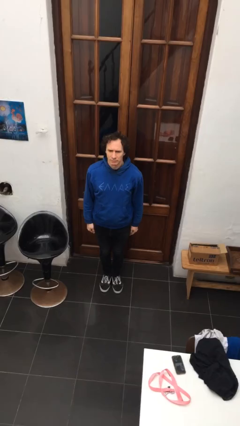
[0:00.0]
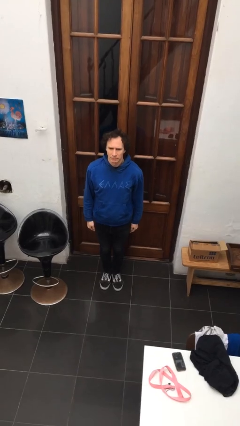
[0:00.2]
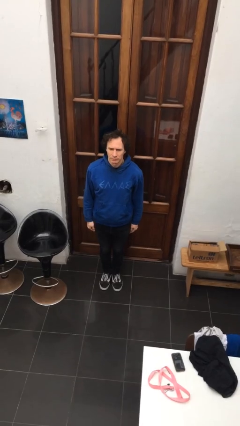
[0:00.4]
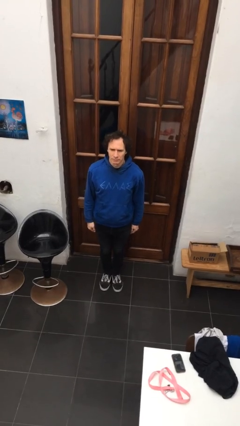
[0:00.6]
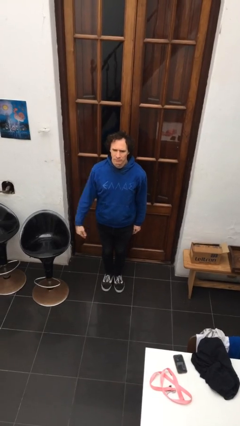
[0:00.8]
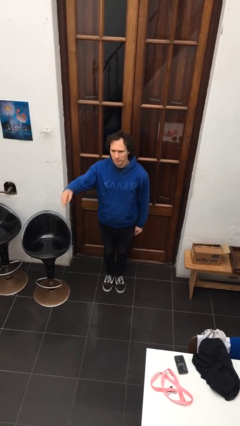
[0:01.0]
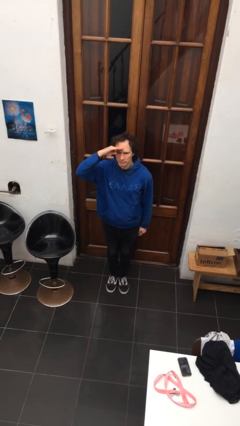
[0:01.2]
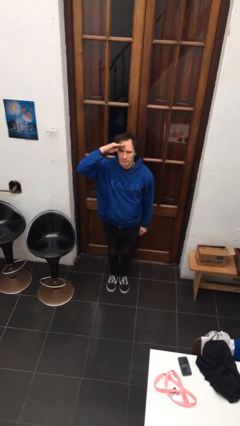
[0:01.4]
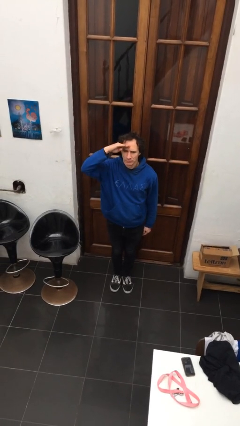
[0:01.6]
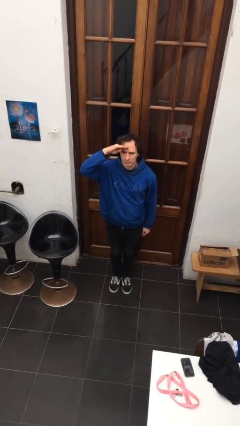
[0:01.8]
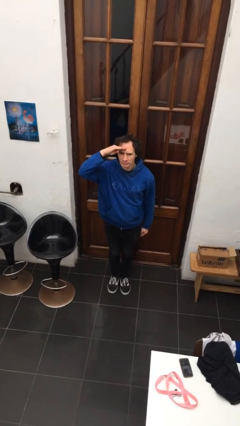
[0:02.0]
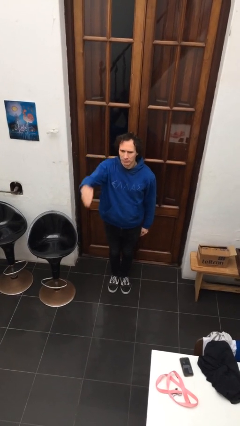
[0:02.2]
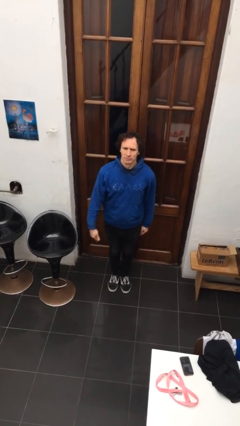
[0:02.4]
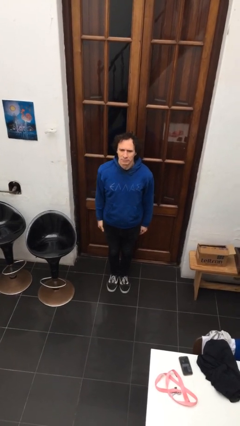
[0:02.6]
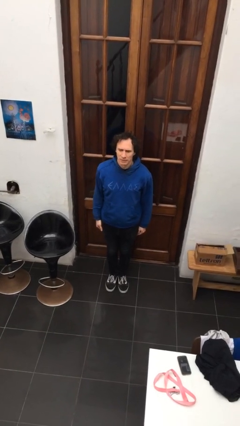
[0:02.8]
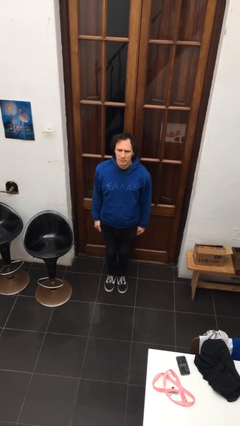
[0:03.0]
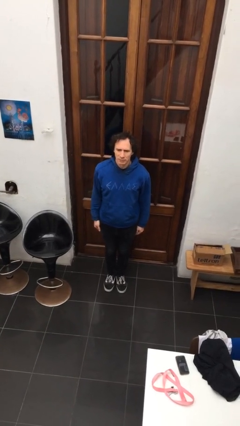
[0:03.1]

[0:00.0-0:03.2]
person salutes

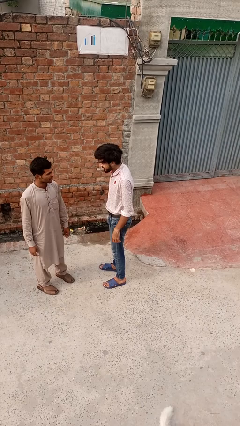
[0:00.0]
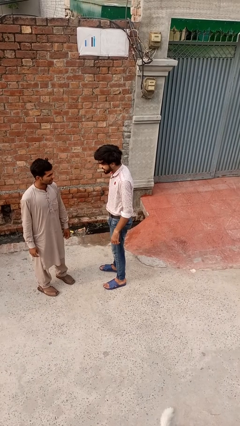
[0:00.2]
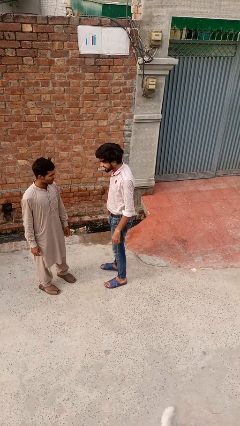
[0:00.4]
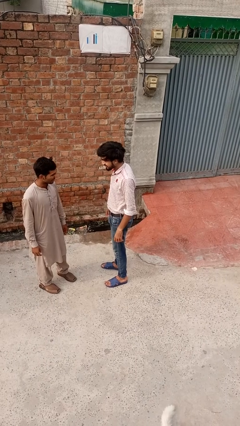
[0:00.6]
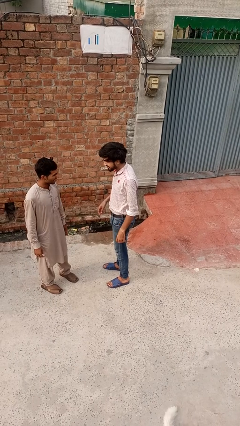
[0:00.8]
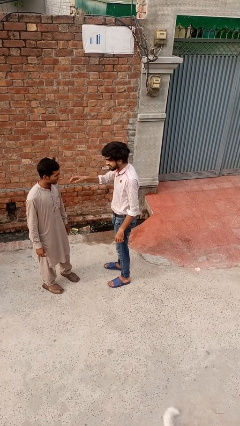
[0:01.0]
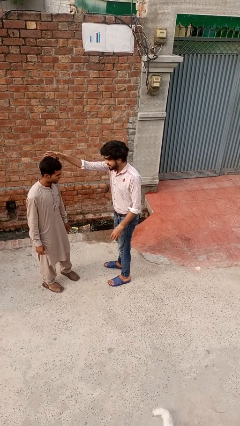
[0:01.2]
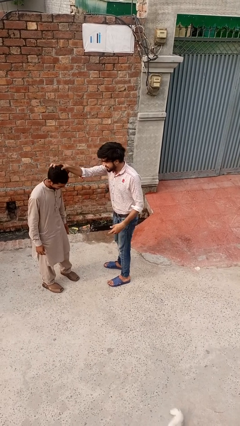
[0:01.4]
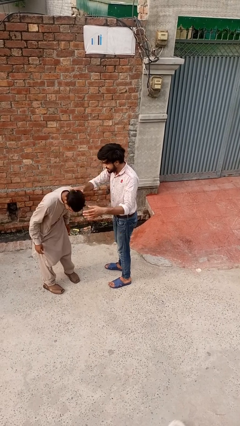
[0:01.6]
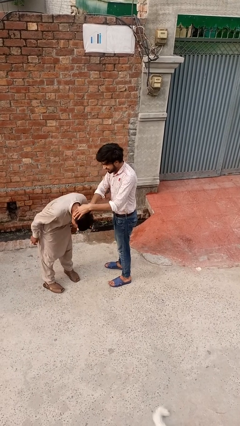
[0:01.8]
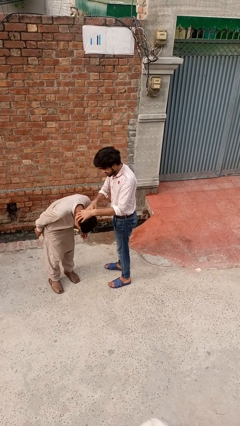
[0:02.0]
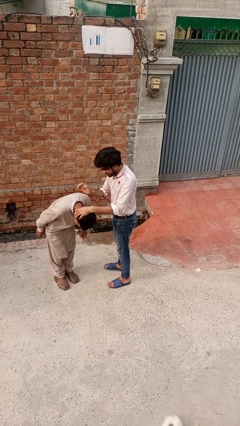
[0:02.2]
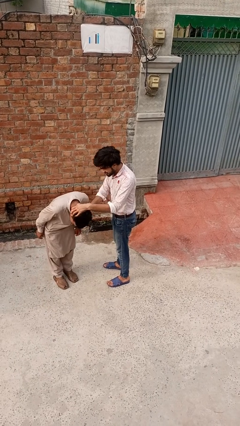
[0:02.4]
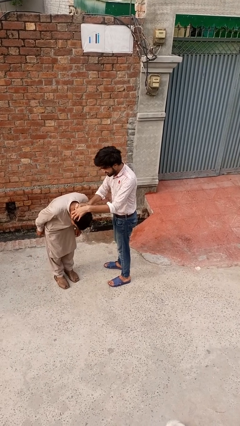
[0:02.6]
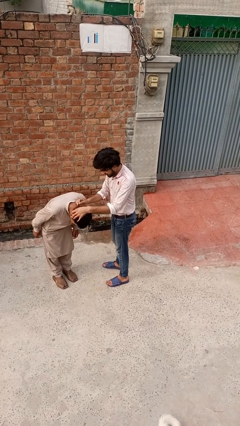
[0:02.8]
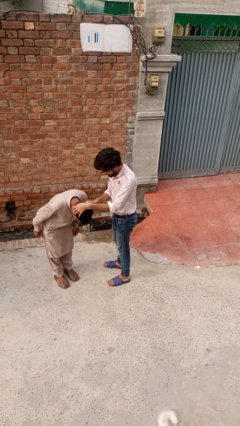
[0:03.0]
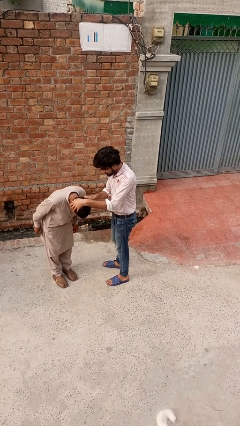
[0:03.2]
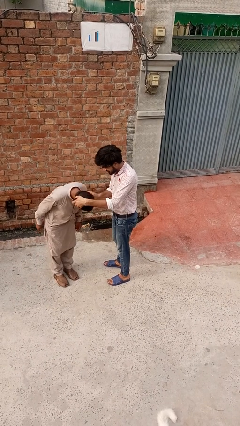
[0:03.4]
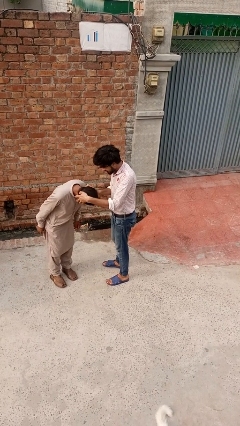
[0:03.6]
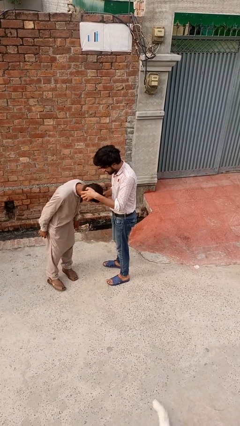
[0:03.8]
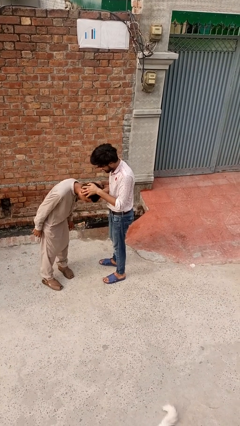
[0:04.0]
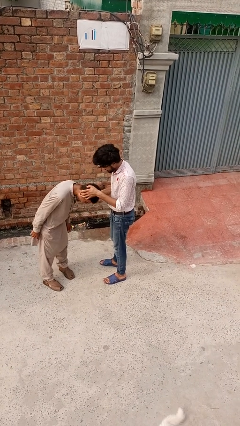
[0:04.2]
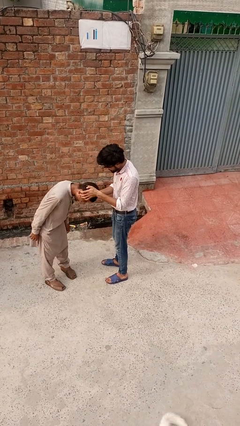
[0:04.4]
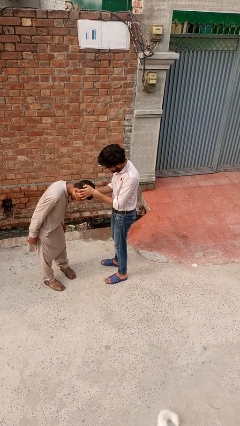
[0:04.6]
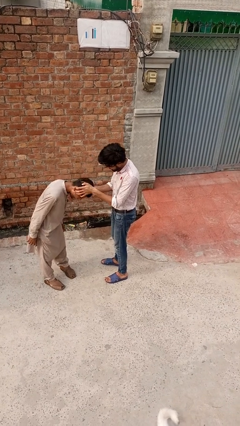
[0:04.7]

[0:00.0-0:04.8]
person grabs person by hair

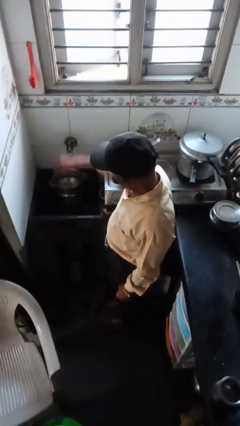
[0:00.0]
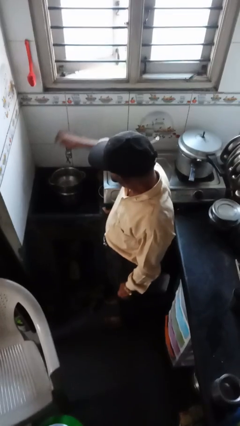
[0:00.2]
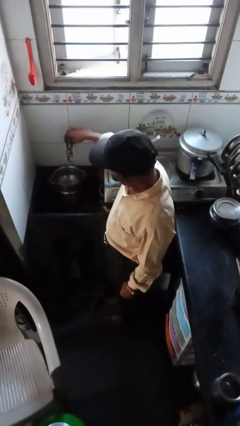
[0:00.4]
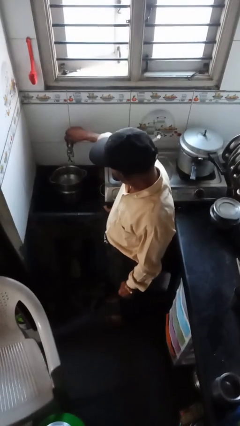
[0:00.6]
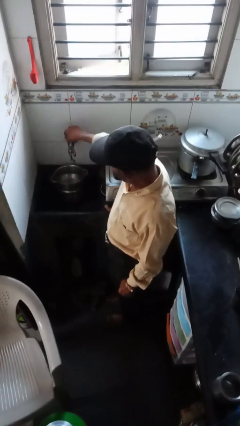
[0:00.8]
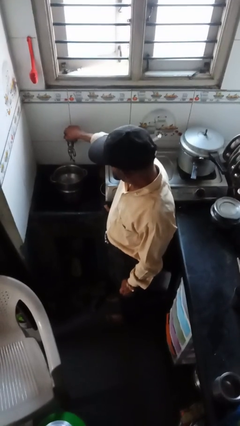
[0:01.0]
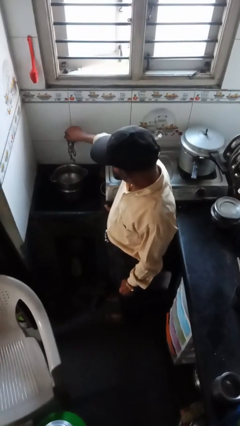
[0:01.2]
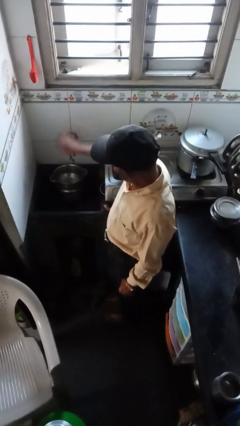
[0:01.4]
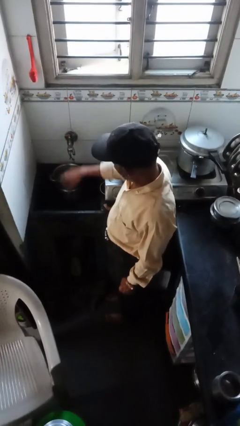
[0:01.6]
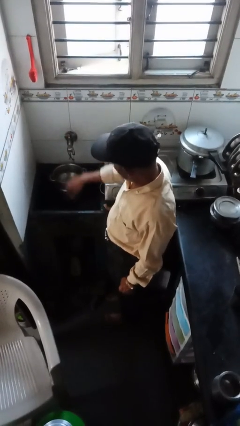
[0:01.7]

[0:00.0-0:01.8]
person turns off faucet

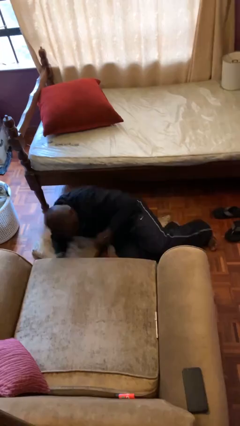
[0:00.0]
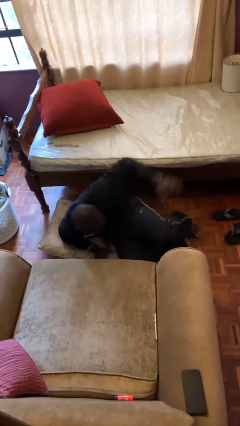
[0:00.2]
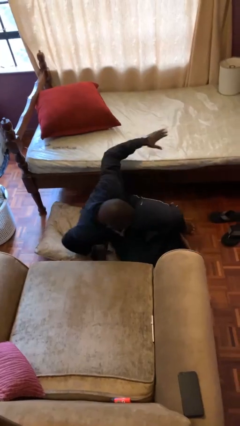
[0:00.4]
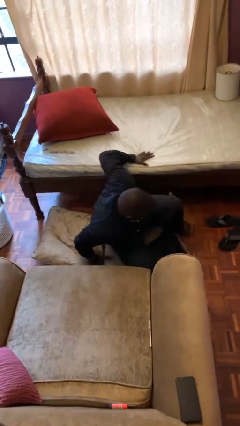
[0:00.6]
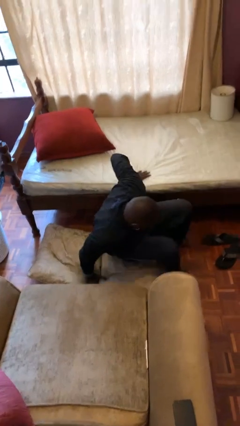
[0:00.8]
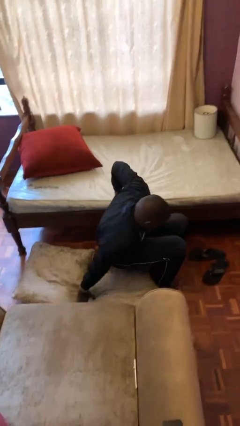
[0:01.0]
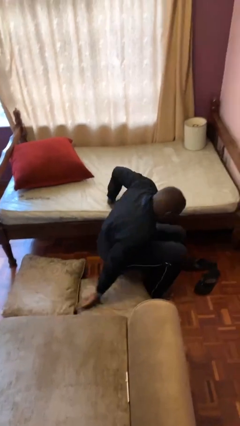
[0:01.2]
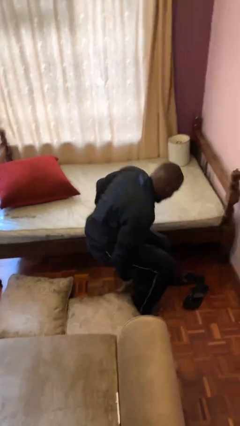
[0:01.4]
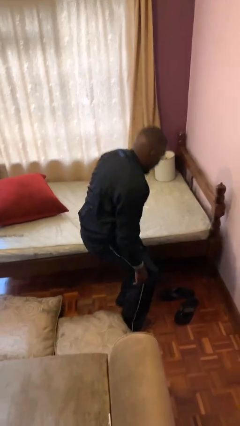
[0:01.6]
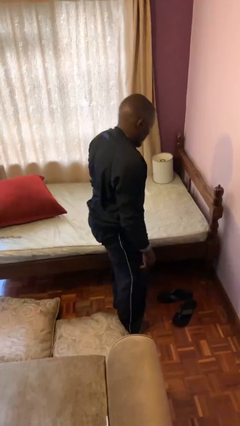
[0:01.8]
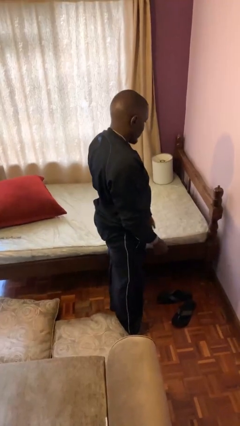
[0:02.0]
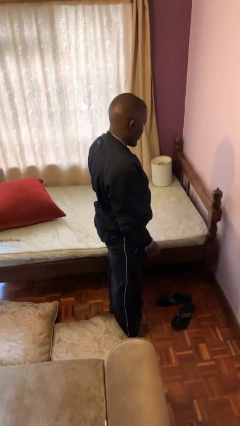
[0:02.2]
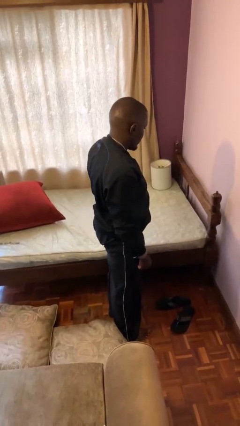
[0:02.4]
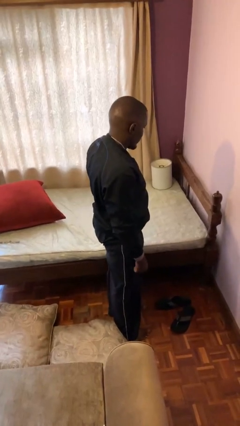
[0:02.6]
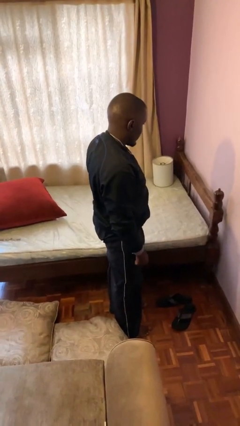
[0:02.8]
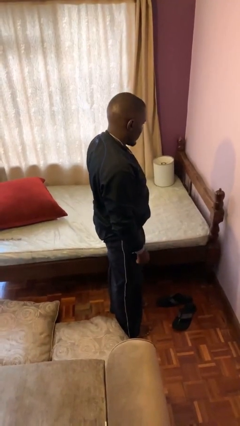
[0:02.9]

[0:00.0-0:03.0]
person stands up from floor

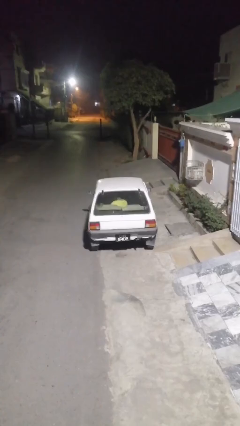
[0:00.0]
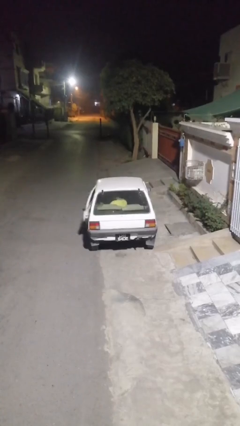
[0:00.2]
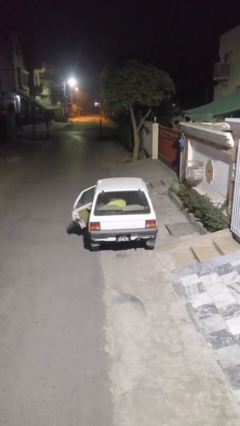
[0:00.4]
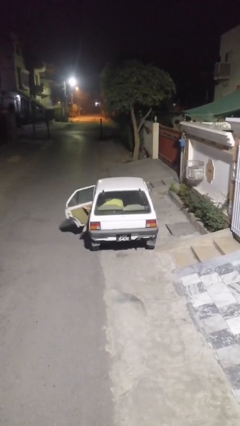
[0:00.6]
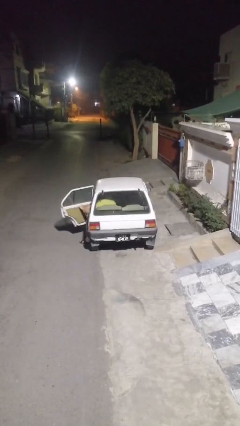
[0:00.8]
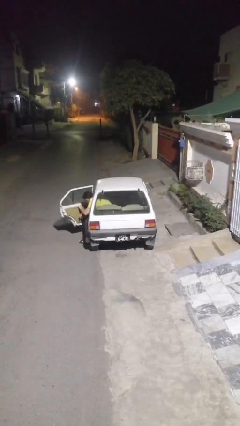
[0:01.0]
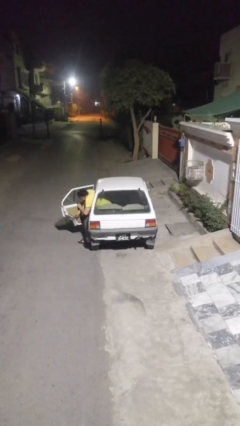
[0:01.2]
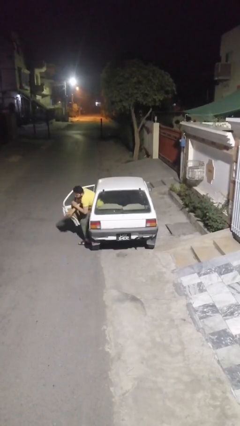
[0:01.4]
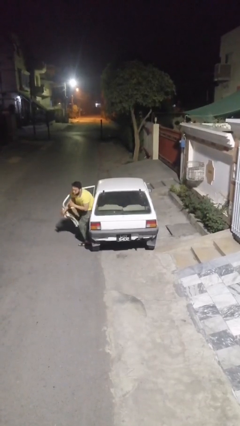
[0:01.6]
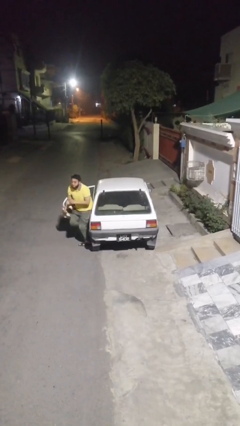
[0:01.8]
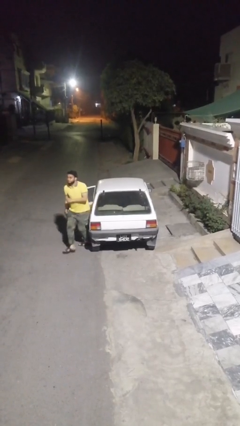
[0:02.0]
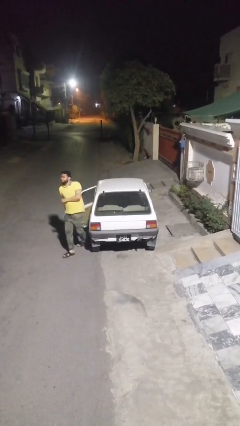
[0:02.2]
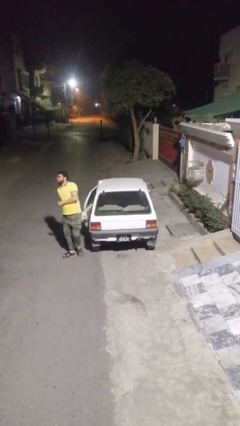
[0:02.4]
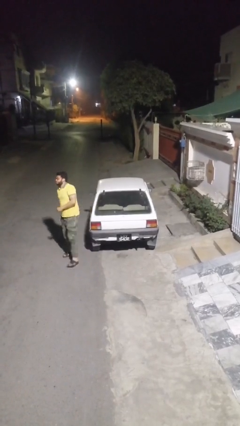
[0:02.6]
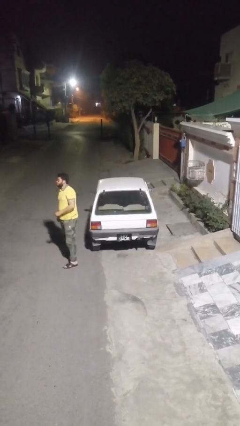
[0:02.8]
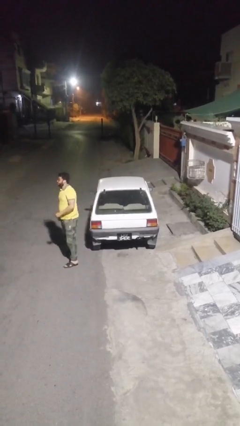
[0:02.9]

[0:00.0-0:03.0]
car drops off person

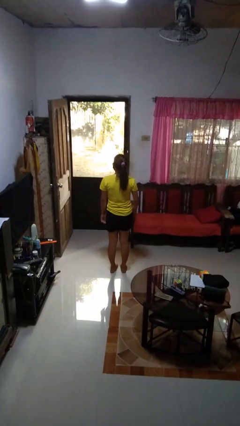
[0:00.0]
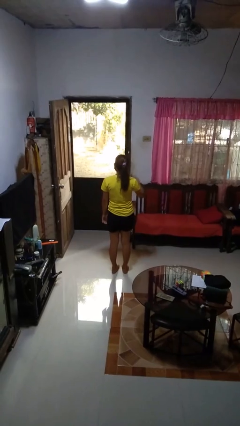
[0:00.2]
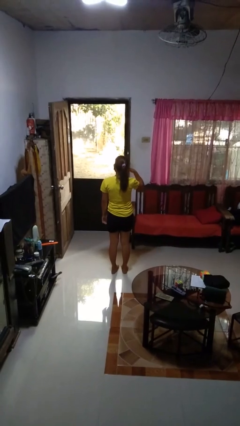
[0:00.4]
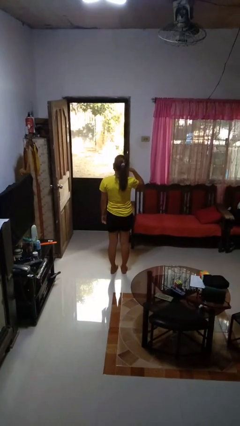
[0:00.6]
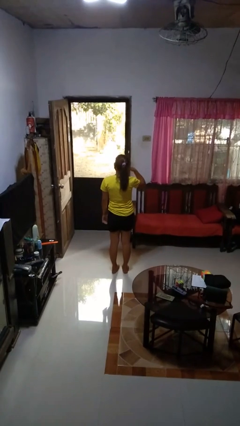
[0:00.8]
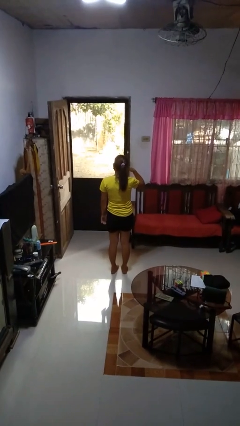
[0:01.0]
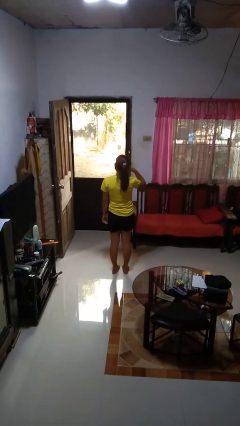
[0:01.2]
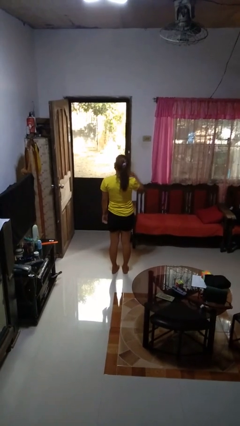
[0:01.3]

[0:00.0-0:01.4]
person gestures call me
